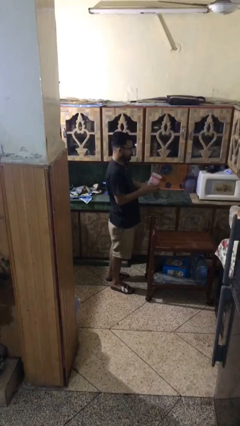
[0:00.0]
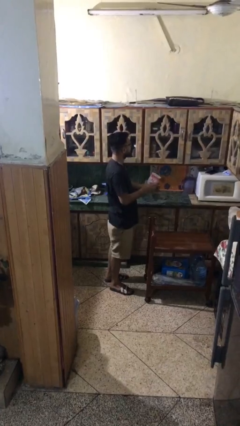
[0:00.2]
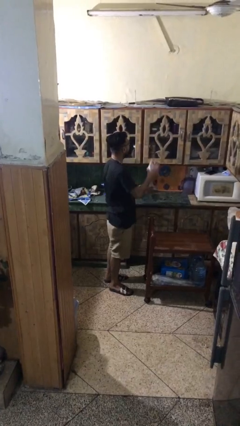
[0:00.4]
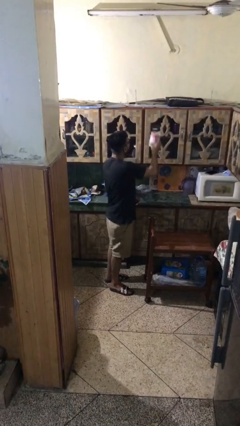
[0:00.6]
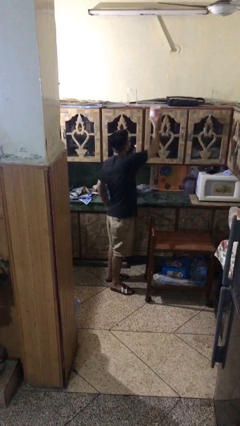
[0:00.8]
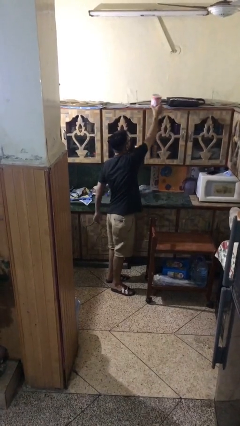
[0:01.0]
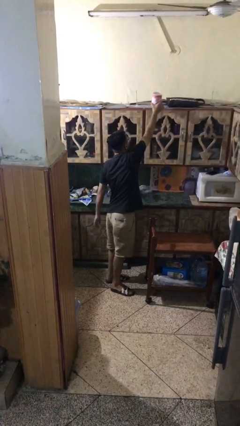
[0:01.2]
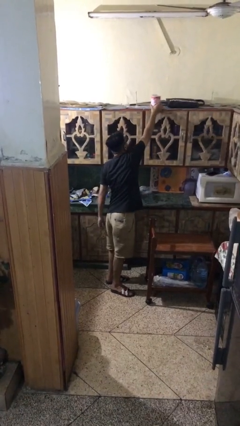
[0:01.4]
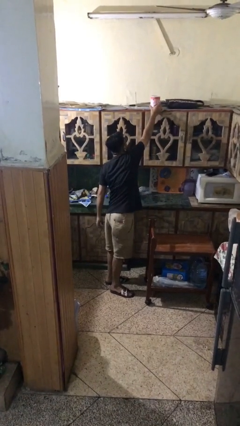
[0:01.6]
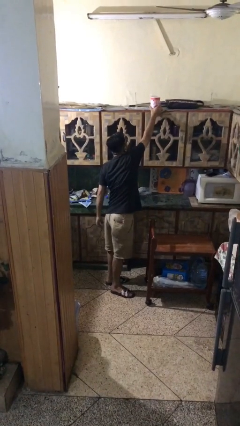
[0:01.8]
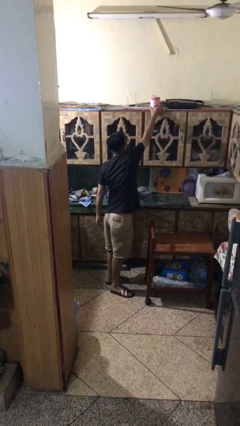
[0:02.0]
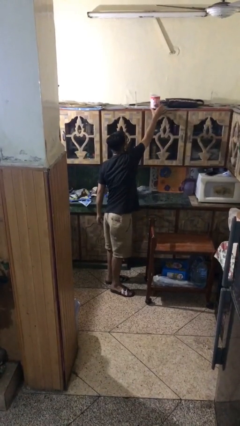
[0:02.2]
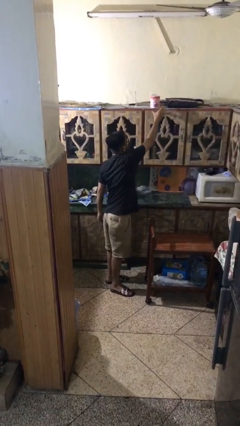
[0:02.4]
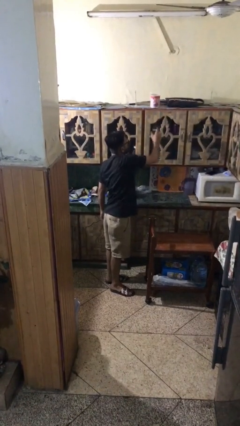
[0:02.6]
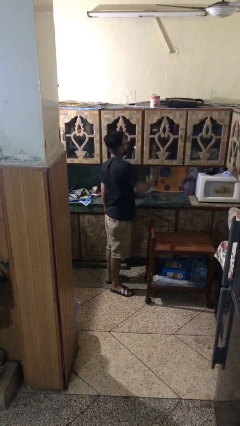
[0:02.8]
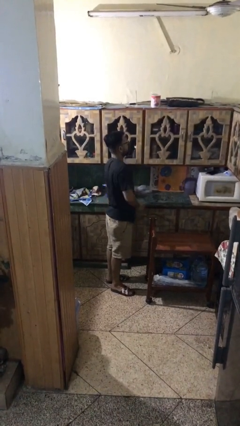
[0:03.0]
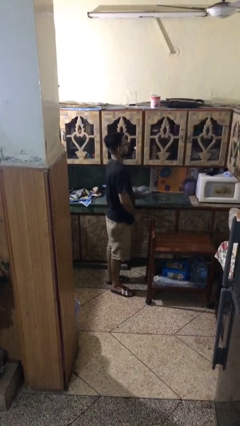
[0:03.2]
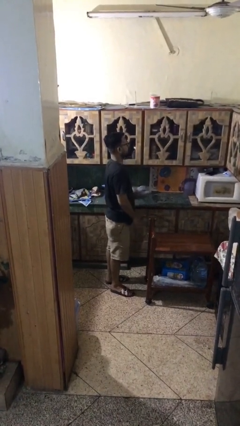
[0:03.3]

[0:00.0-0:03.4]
person puts down object on shelf

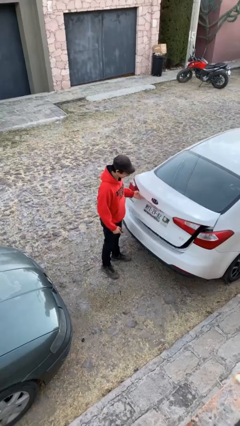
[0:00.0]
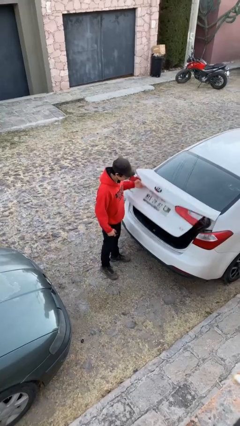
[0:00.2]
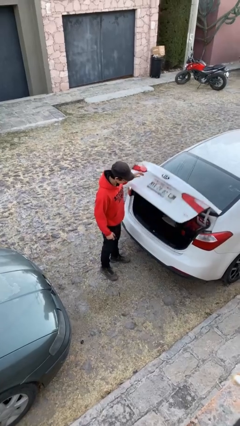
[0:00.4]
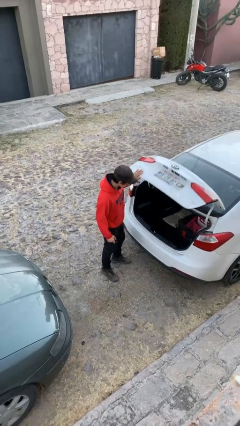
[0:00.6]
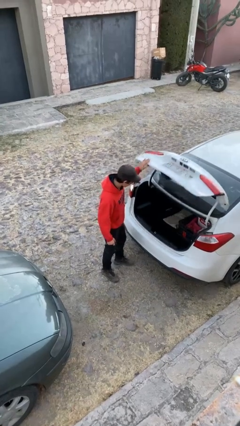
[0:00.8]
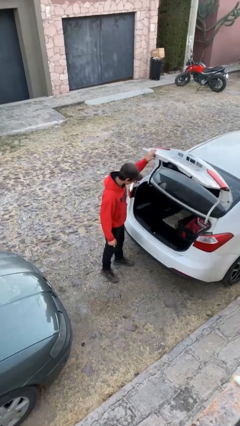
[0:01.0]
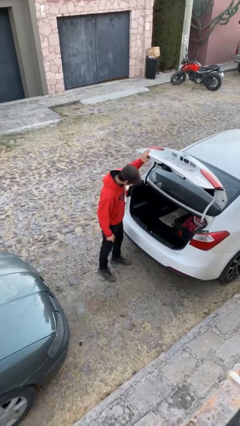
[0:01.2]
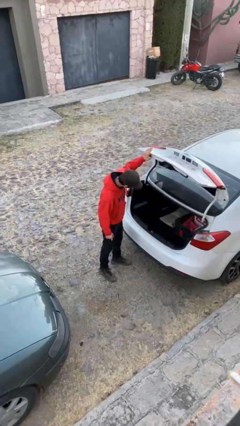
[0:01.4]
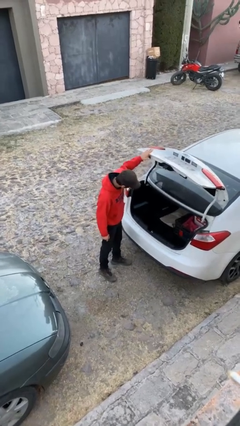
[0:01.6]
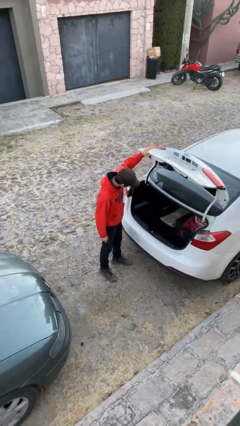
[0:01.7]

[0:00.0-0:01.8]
person opens car trunk

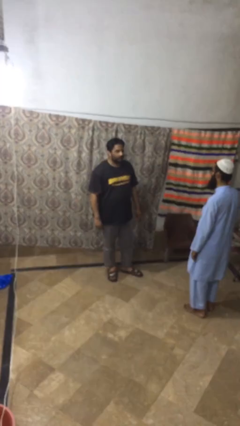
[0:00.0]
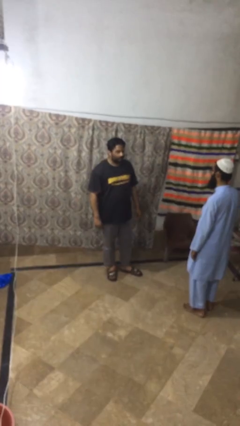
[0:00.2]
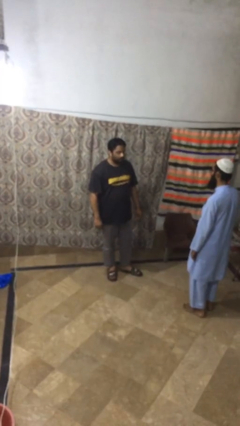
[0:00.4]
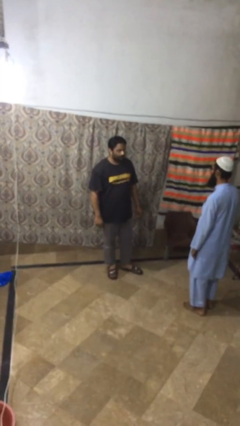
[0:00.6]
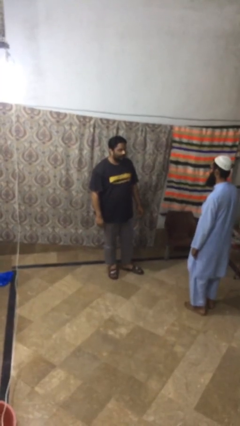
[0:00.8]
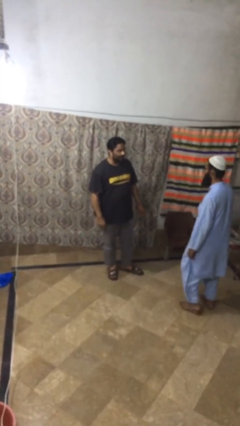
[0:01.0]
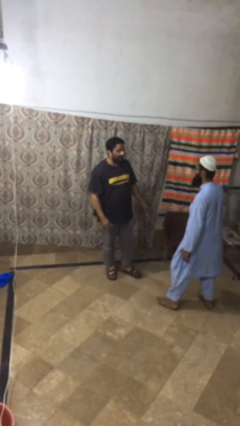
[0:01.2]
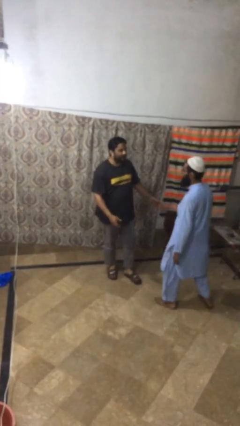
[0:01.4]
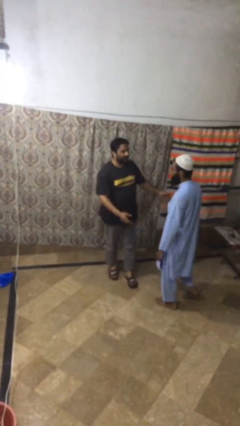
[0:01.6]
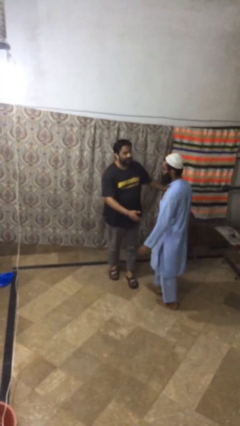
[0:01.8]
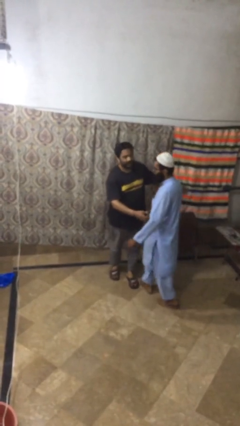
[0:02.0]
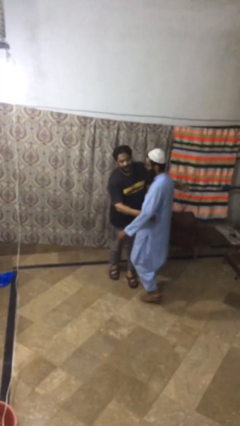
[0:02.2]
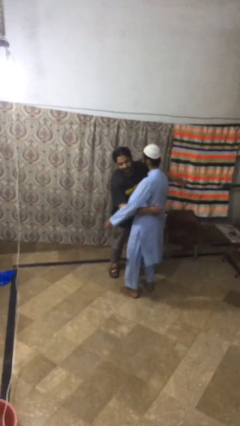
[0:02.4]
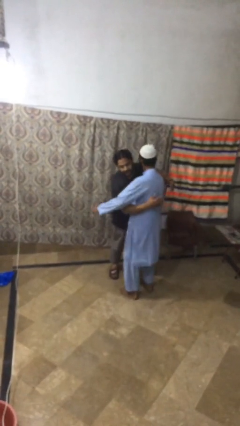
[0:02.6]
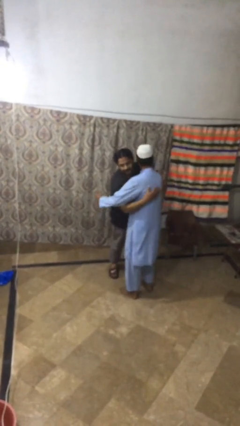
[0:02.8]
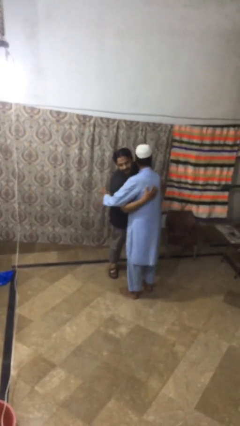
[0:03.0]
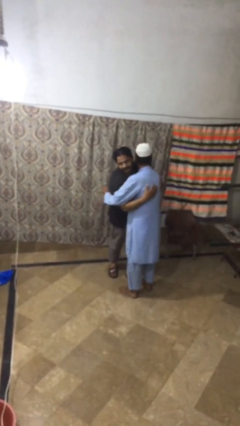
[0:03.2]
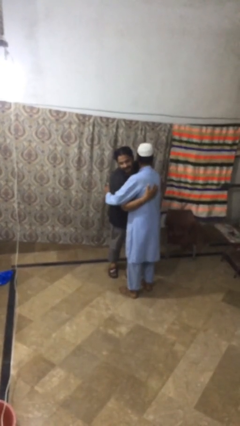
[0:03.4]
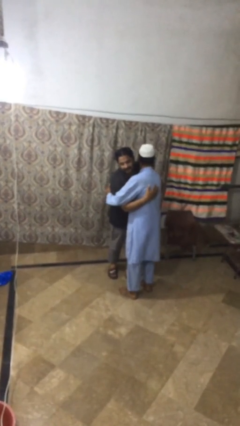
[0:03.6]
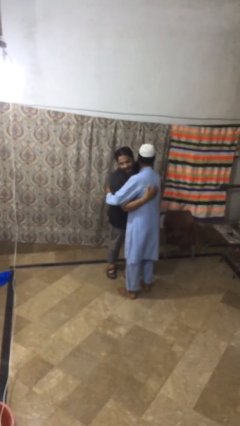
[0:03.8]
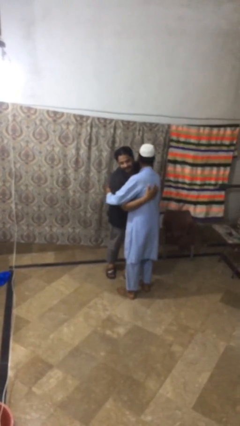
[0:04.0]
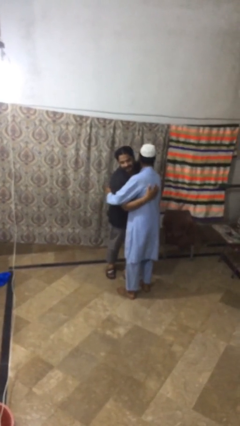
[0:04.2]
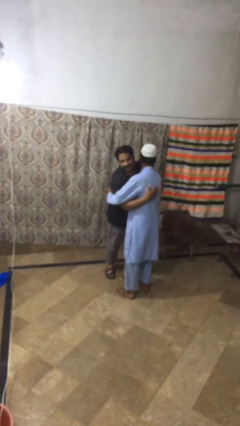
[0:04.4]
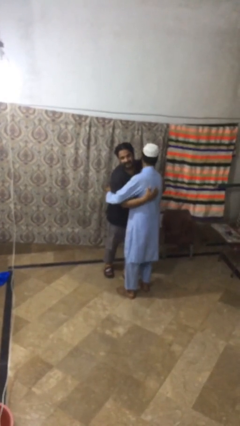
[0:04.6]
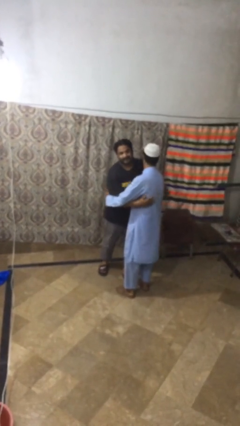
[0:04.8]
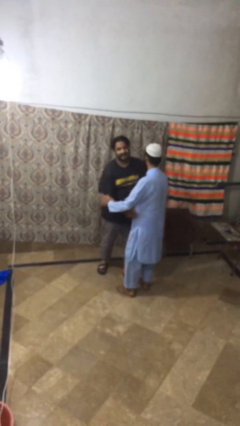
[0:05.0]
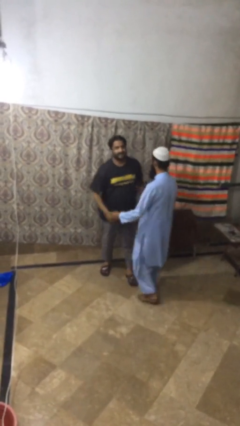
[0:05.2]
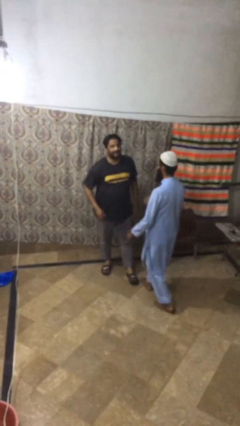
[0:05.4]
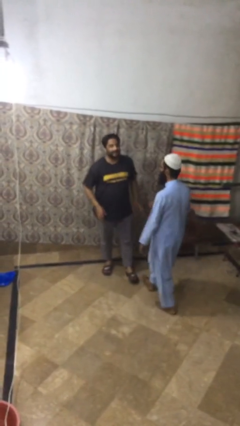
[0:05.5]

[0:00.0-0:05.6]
person embraces person

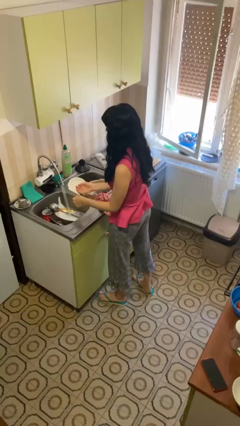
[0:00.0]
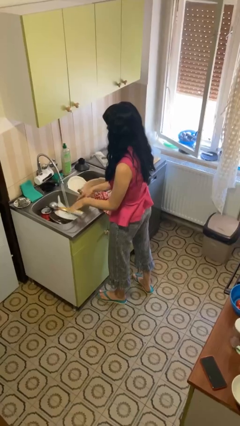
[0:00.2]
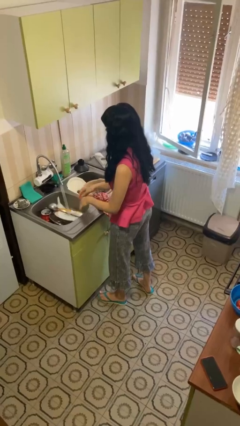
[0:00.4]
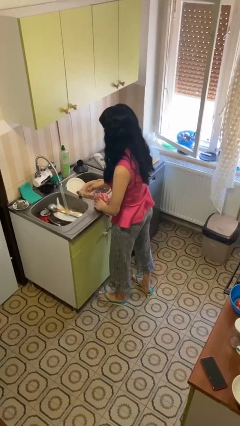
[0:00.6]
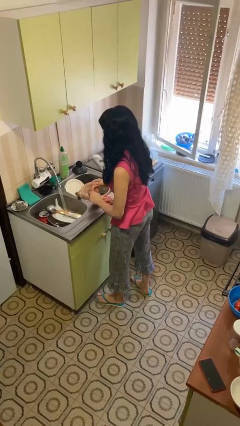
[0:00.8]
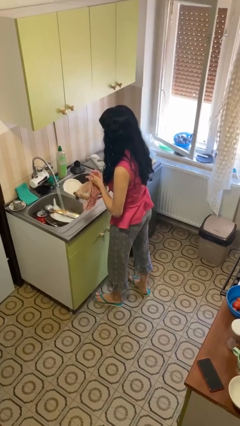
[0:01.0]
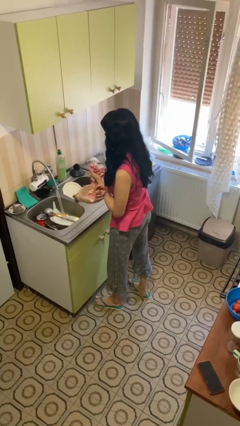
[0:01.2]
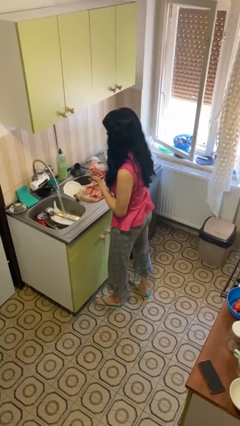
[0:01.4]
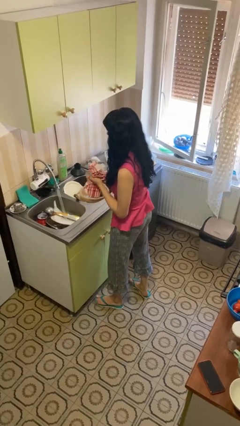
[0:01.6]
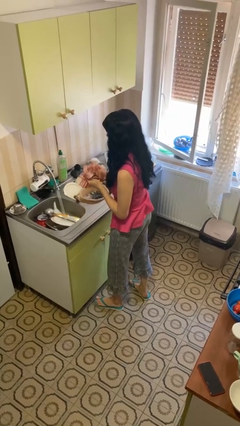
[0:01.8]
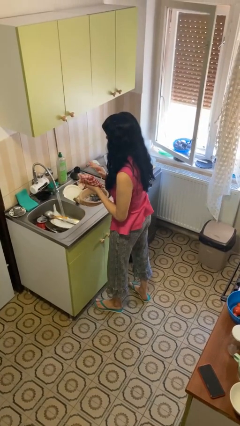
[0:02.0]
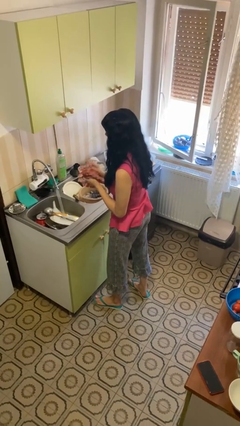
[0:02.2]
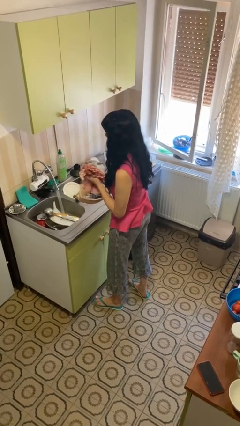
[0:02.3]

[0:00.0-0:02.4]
person dries hands with towel

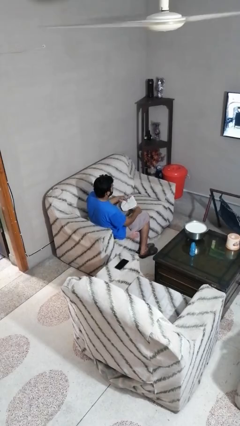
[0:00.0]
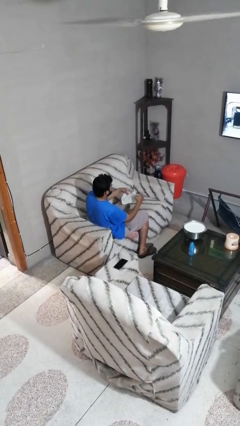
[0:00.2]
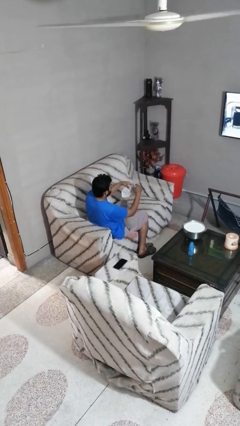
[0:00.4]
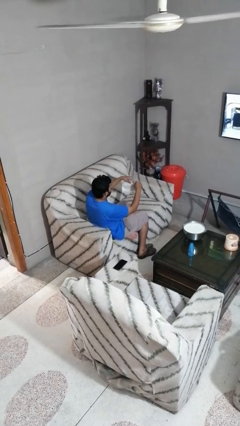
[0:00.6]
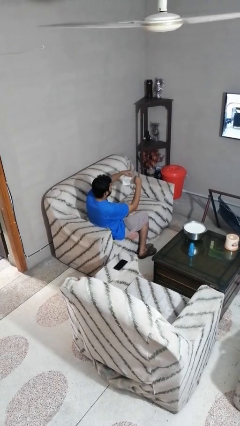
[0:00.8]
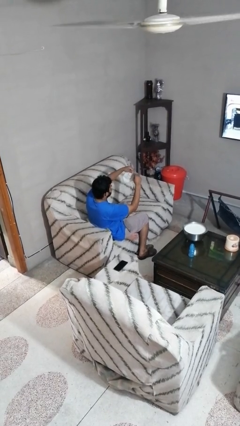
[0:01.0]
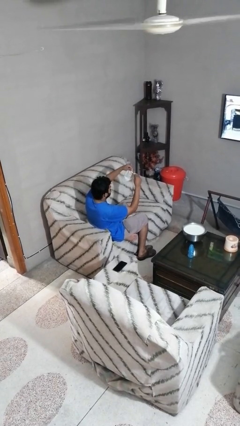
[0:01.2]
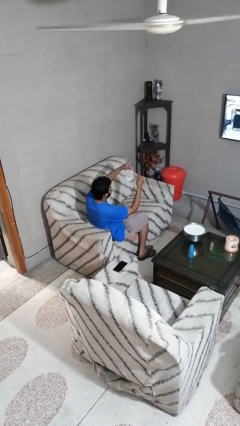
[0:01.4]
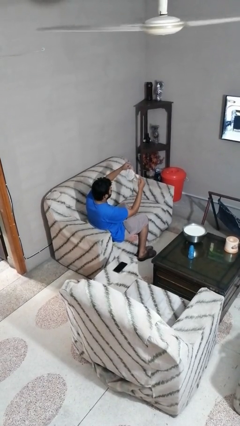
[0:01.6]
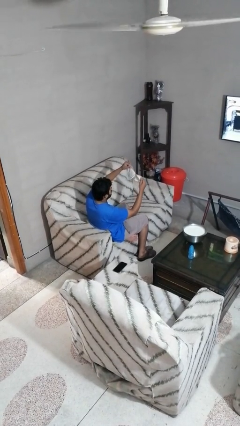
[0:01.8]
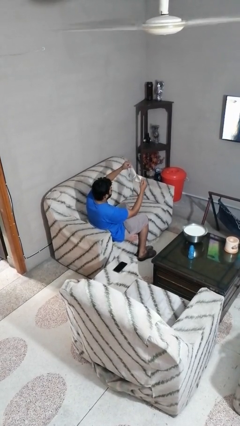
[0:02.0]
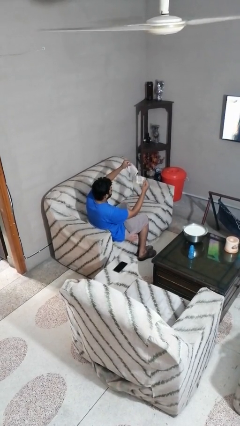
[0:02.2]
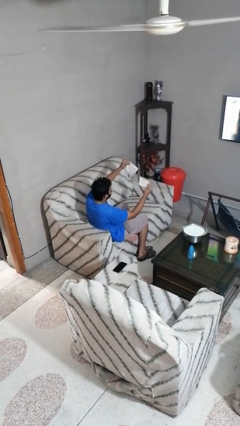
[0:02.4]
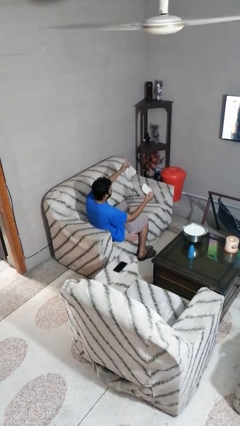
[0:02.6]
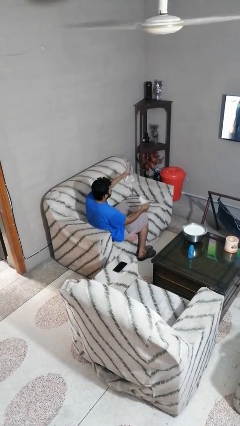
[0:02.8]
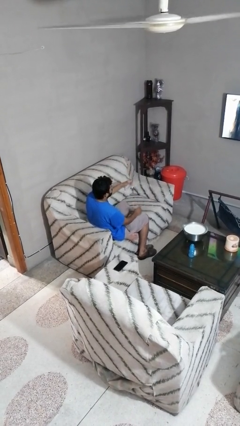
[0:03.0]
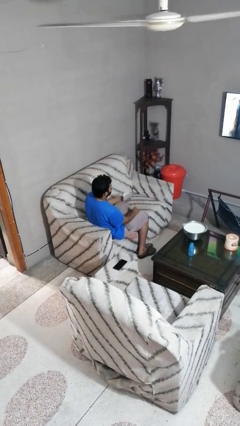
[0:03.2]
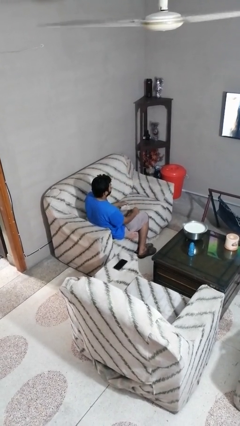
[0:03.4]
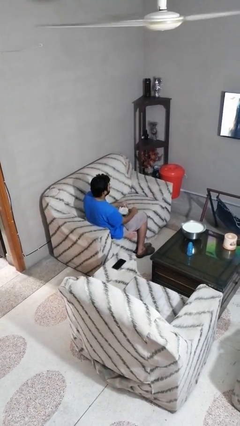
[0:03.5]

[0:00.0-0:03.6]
person tears paper

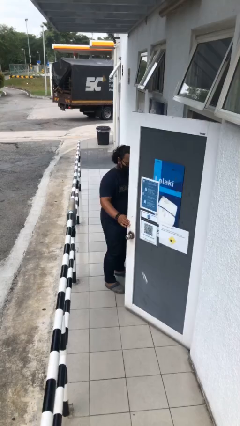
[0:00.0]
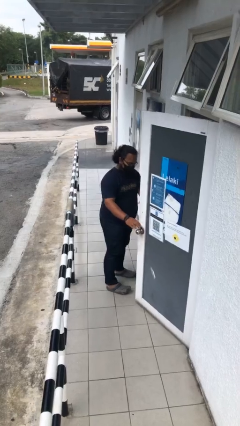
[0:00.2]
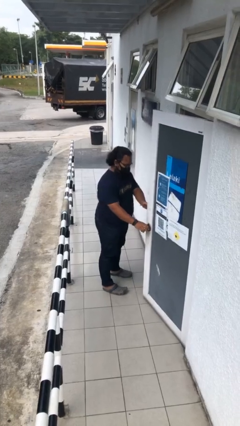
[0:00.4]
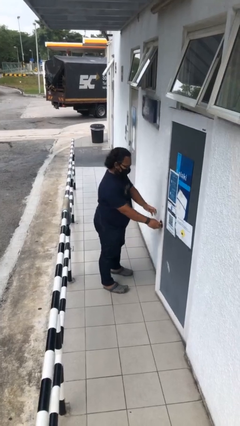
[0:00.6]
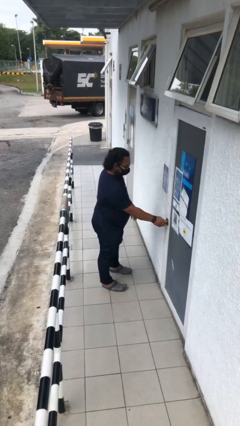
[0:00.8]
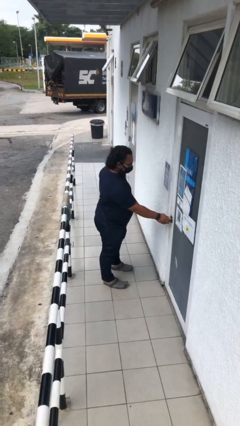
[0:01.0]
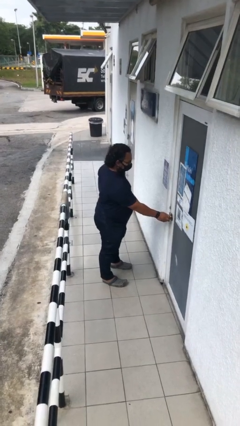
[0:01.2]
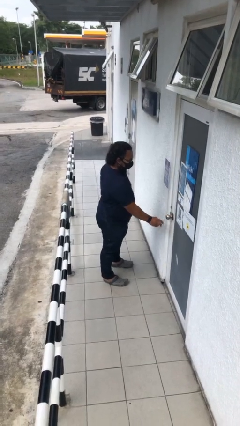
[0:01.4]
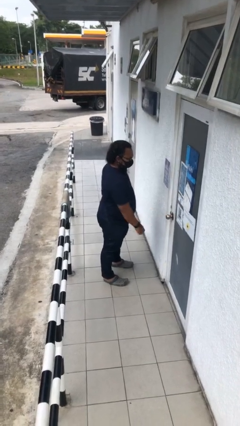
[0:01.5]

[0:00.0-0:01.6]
person closes facility door
